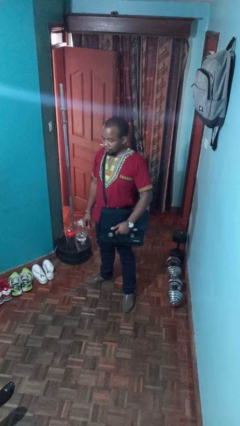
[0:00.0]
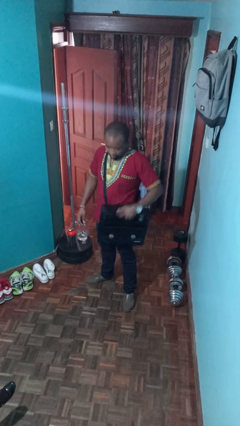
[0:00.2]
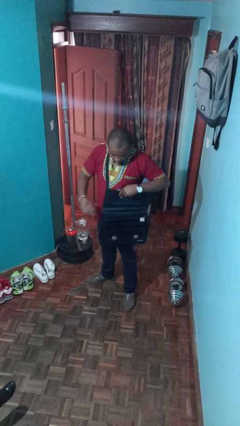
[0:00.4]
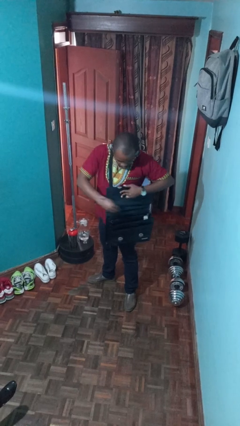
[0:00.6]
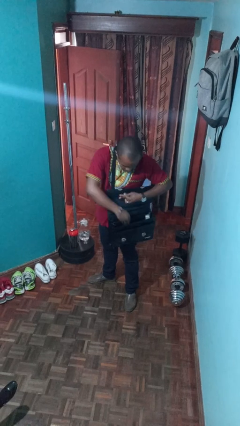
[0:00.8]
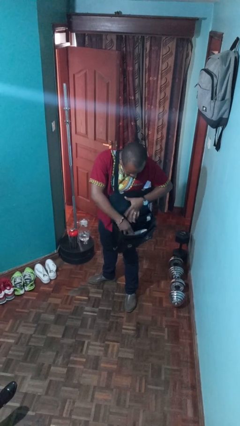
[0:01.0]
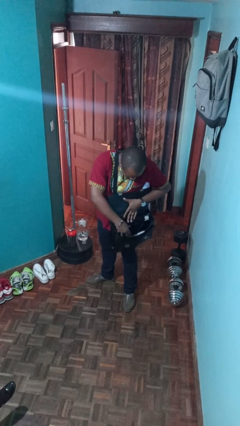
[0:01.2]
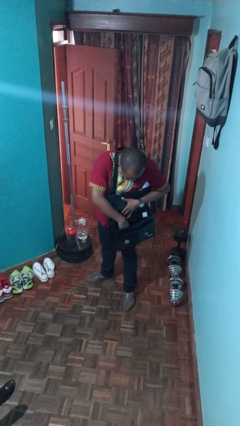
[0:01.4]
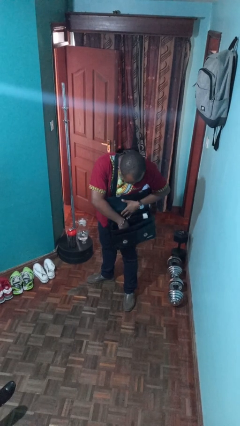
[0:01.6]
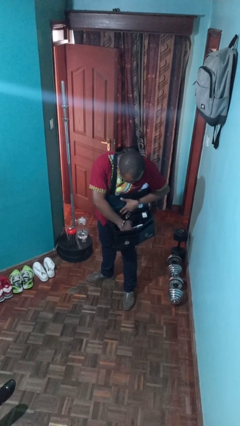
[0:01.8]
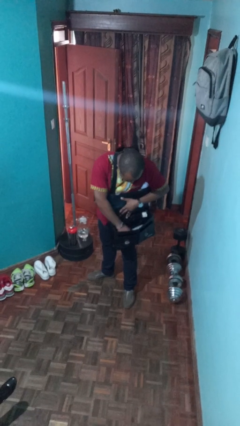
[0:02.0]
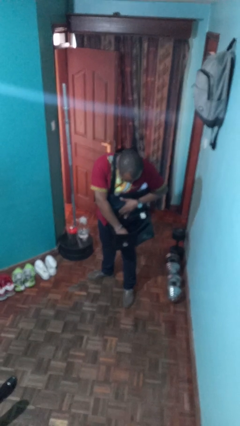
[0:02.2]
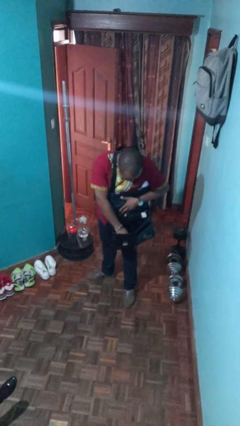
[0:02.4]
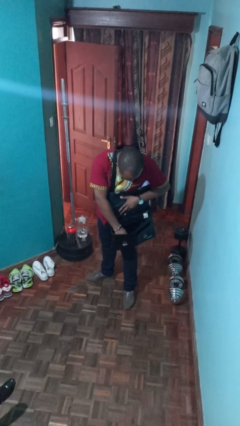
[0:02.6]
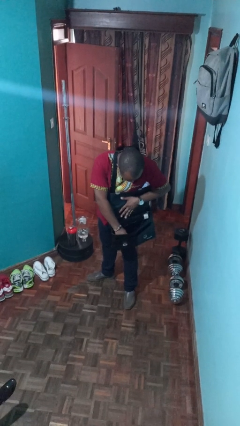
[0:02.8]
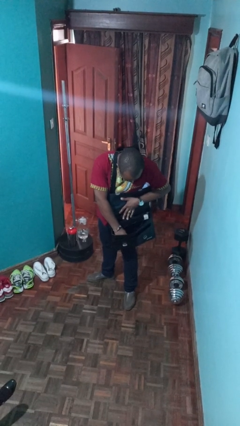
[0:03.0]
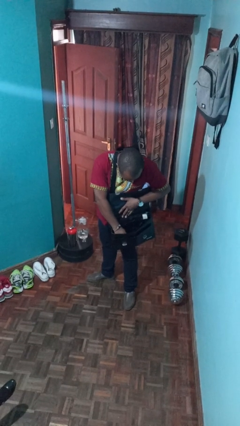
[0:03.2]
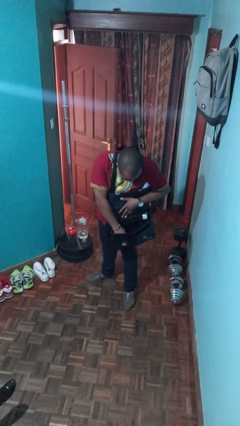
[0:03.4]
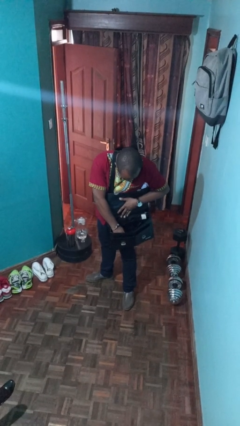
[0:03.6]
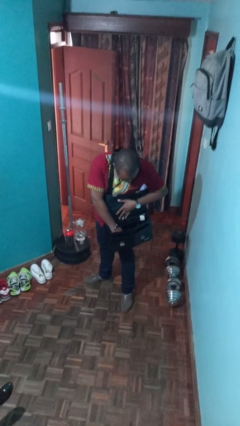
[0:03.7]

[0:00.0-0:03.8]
person searches in purse

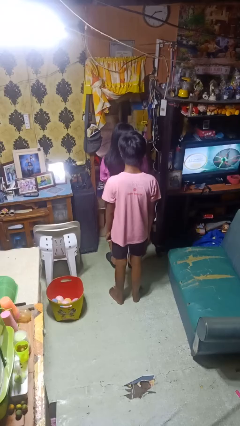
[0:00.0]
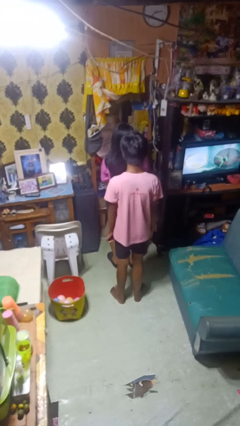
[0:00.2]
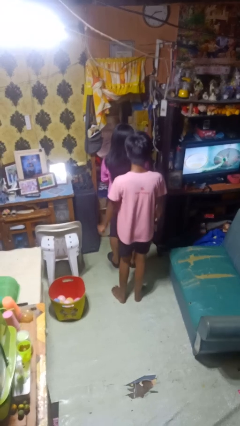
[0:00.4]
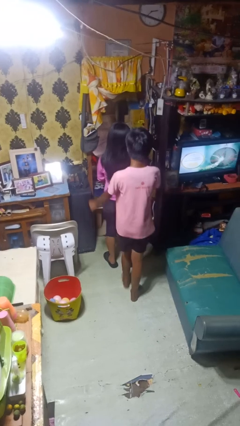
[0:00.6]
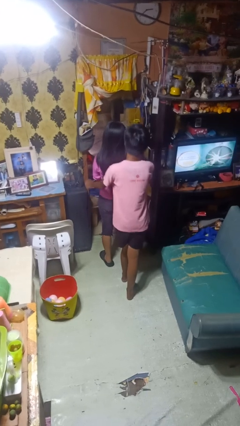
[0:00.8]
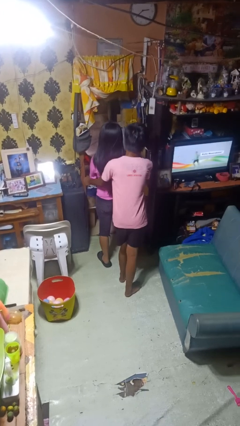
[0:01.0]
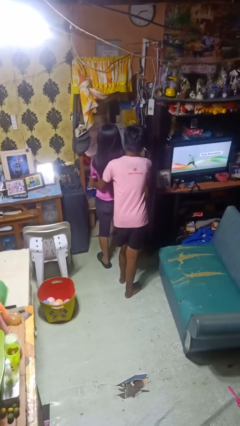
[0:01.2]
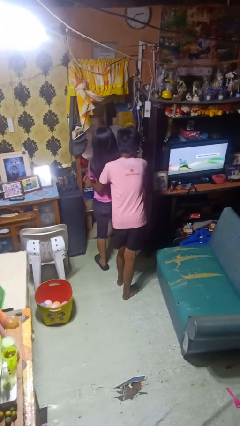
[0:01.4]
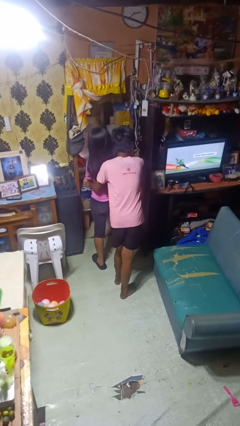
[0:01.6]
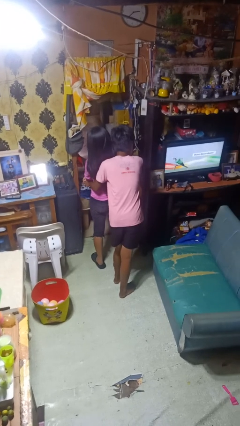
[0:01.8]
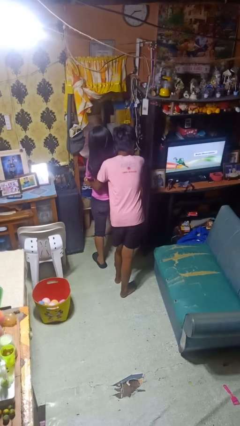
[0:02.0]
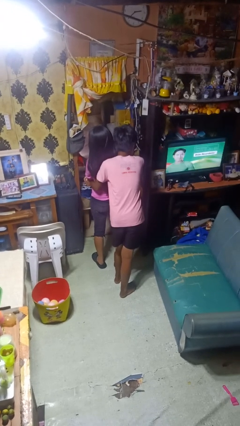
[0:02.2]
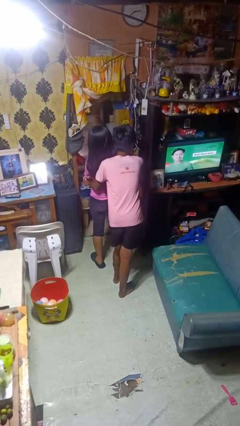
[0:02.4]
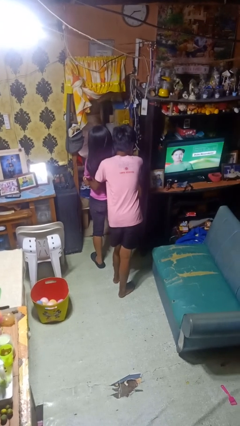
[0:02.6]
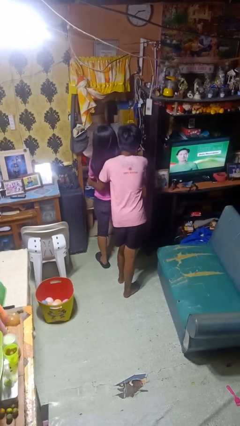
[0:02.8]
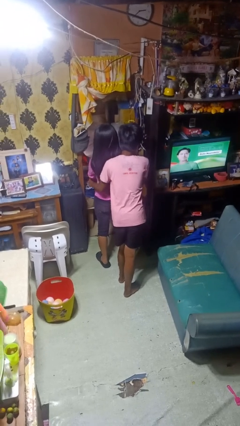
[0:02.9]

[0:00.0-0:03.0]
person hugs person from behind

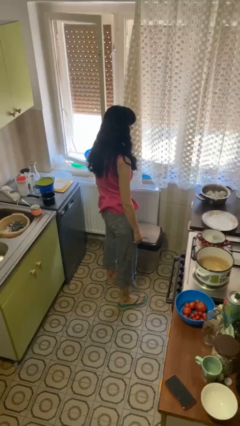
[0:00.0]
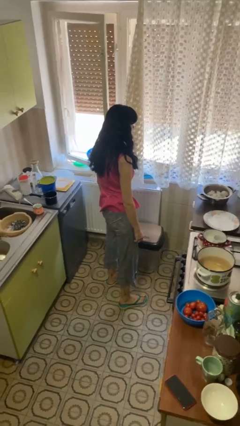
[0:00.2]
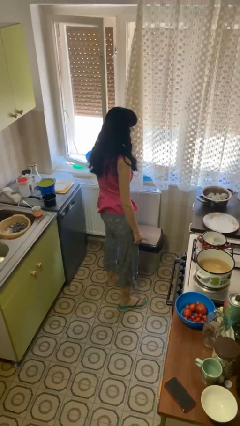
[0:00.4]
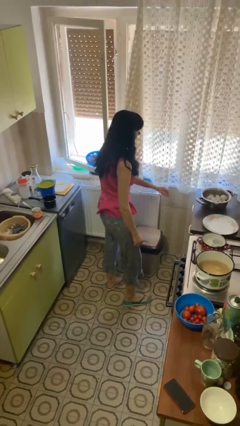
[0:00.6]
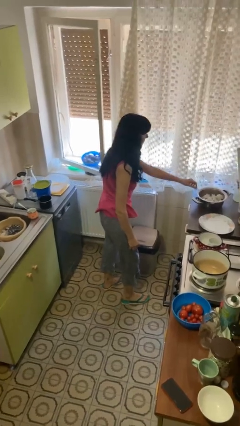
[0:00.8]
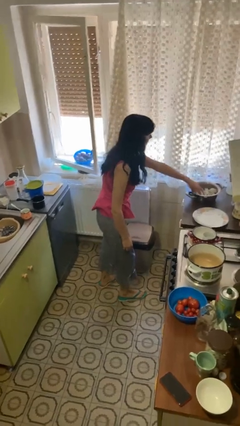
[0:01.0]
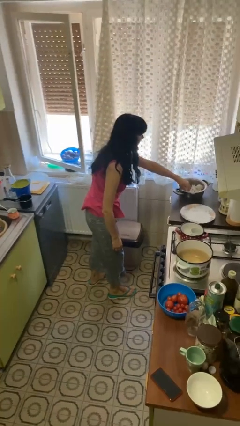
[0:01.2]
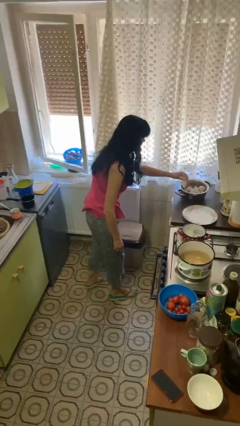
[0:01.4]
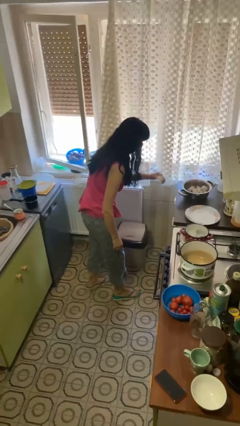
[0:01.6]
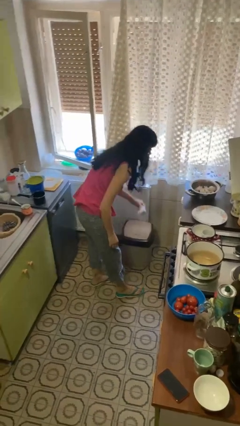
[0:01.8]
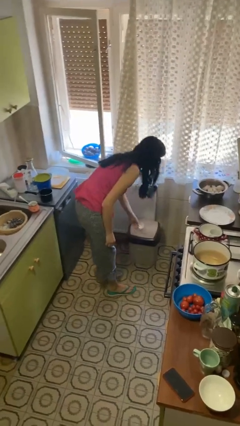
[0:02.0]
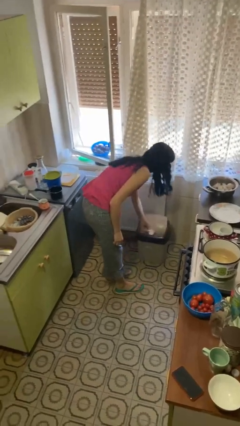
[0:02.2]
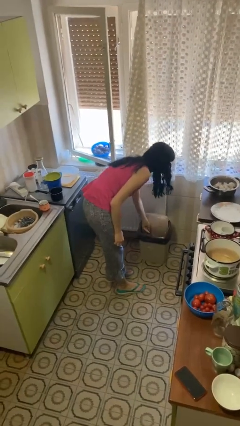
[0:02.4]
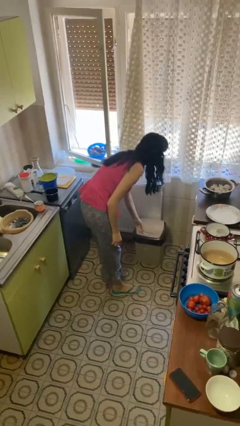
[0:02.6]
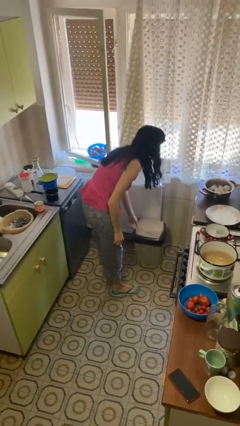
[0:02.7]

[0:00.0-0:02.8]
person discards trash

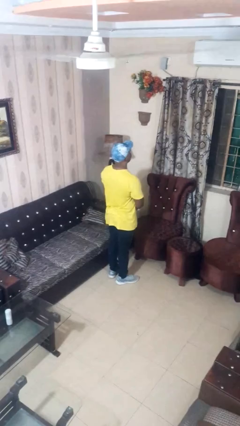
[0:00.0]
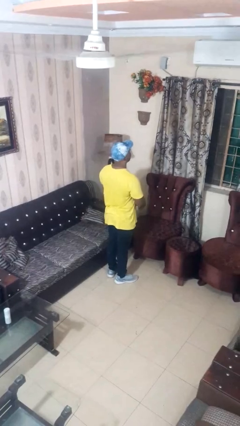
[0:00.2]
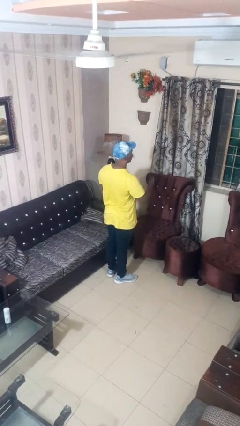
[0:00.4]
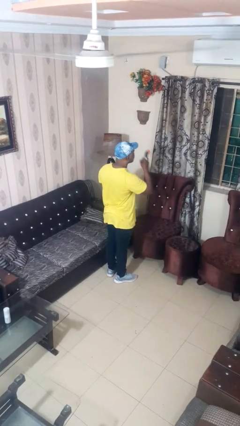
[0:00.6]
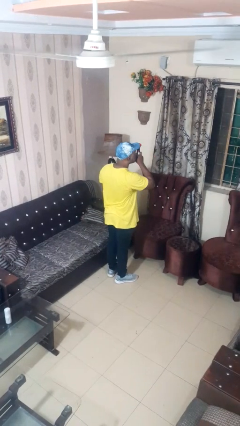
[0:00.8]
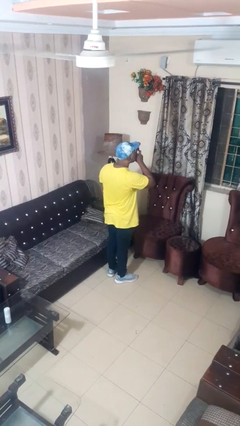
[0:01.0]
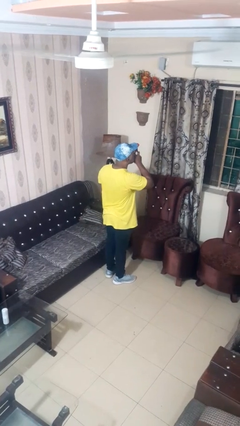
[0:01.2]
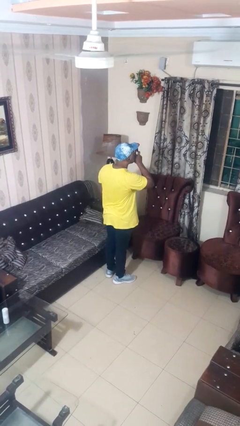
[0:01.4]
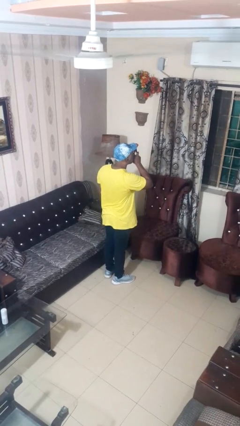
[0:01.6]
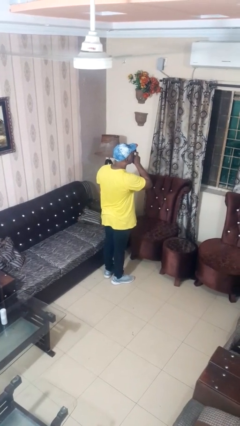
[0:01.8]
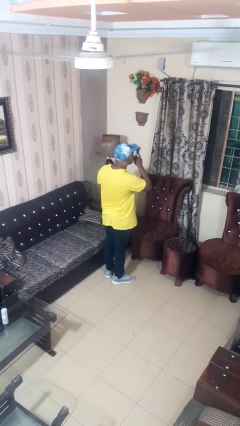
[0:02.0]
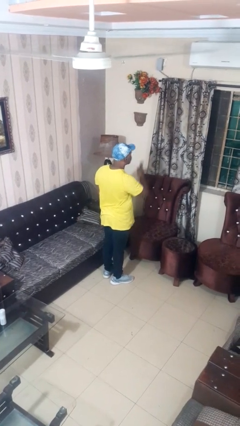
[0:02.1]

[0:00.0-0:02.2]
person vapes

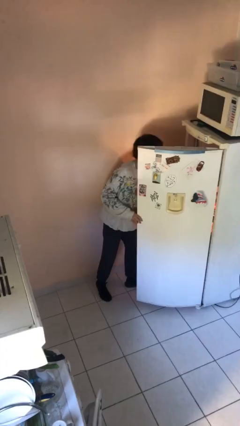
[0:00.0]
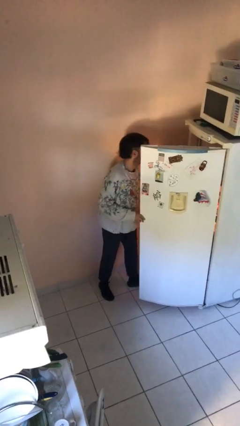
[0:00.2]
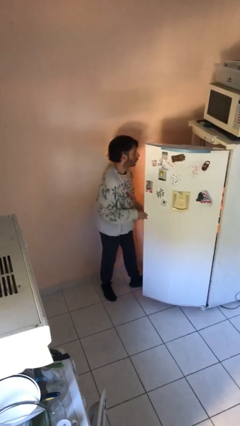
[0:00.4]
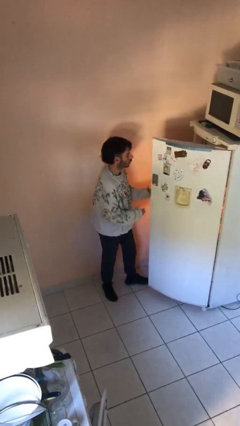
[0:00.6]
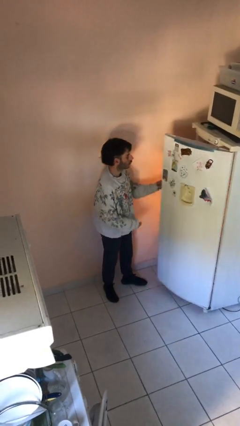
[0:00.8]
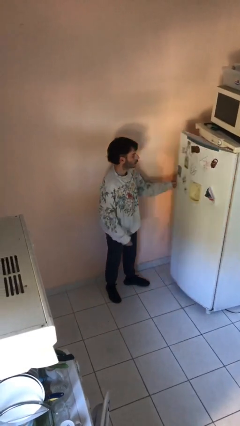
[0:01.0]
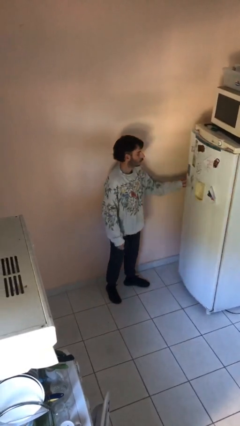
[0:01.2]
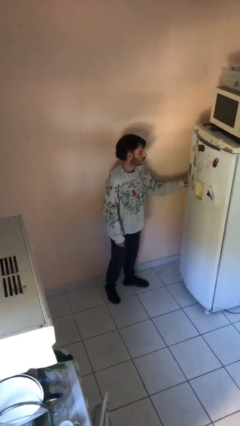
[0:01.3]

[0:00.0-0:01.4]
person closes refrigerator

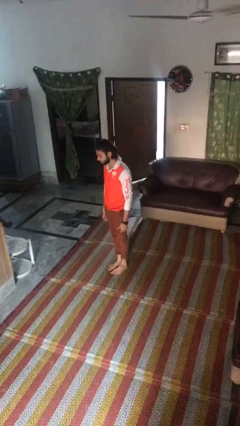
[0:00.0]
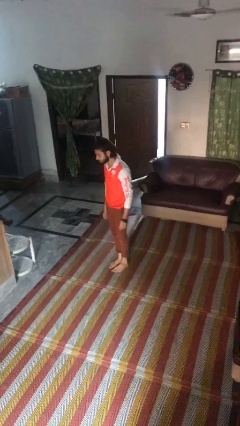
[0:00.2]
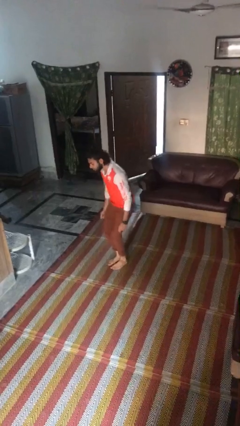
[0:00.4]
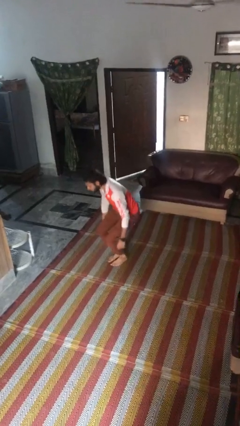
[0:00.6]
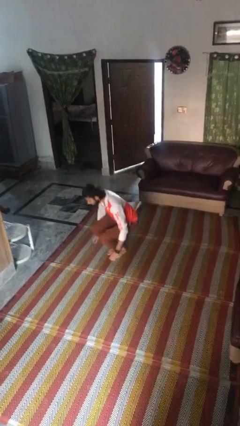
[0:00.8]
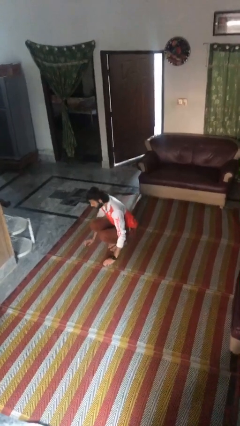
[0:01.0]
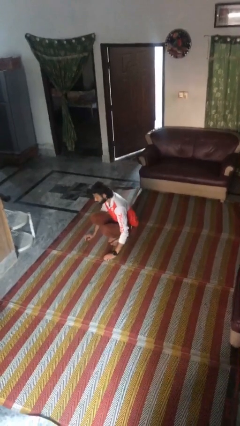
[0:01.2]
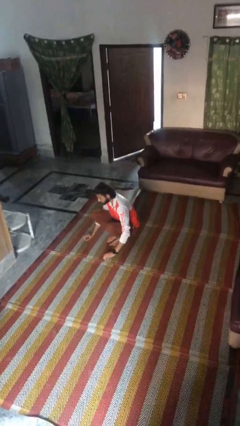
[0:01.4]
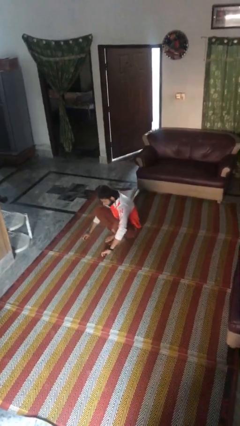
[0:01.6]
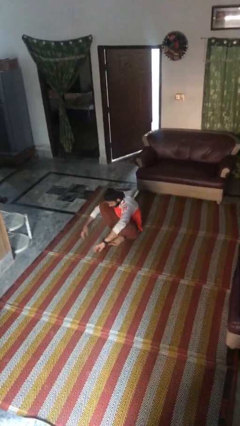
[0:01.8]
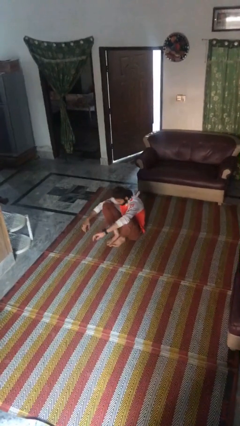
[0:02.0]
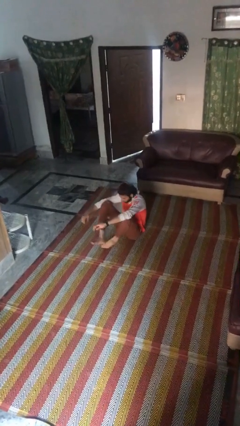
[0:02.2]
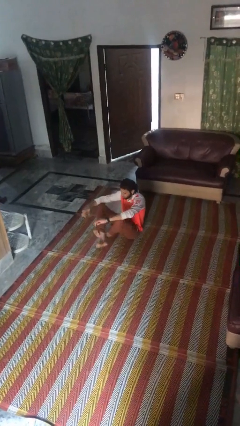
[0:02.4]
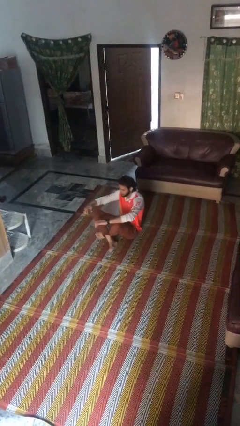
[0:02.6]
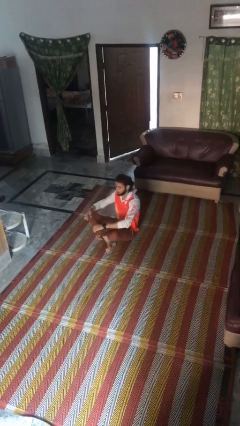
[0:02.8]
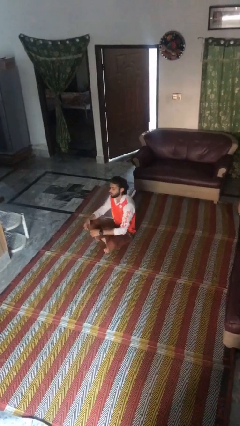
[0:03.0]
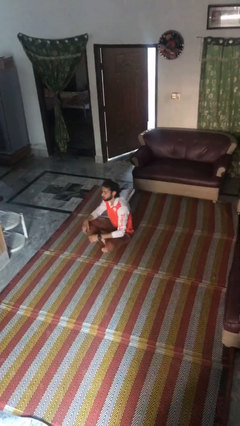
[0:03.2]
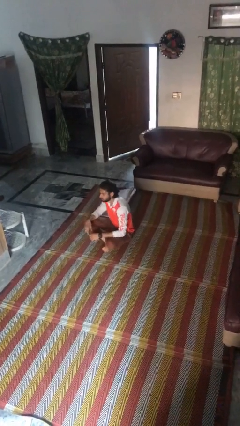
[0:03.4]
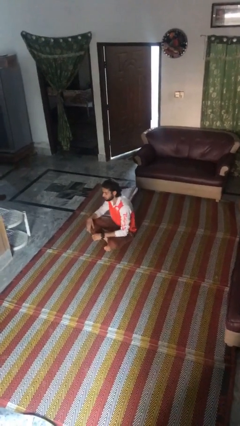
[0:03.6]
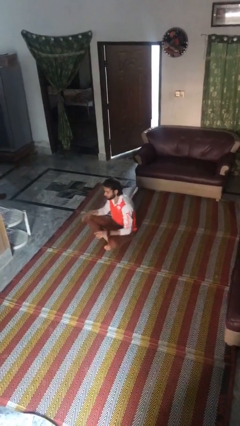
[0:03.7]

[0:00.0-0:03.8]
person sits crisscross

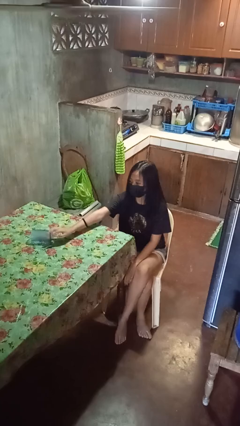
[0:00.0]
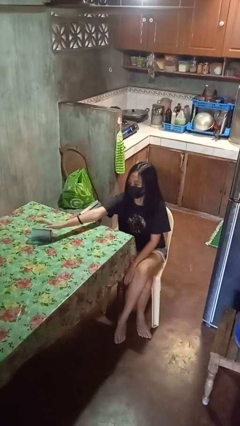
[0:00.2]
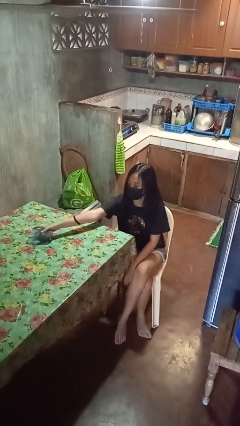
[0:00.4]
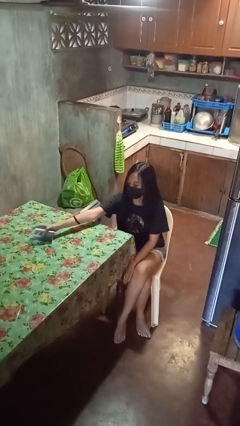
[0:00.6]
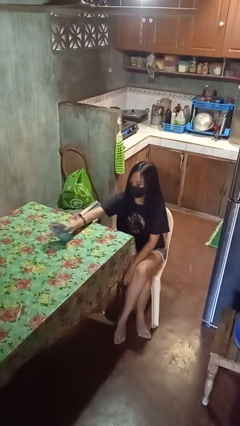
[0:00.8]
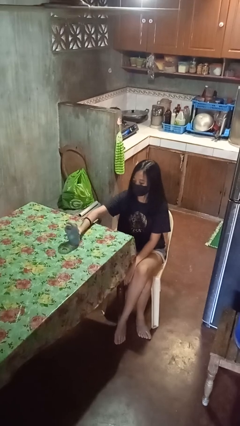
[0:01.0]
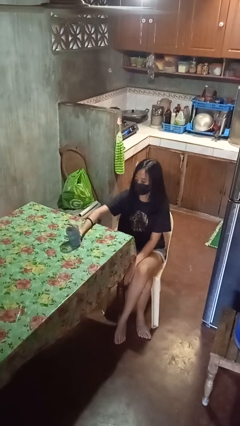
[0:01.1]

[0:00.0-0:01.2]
person sets upright glass
